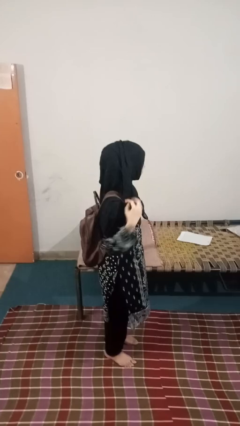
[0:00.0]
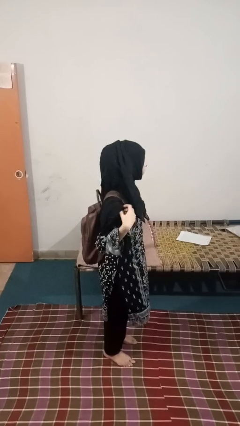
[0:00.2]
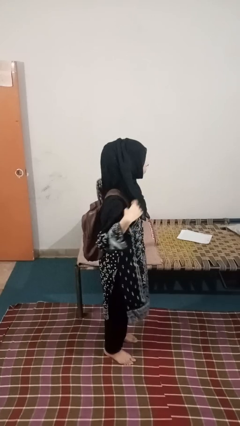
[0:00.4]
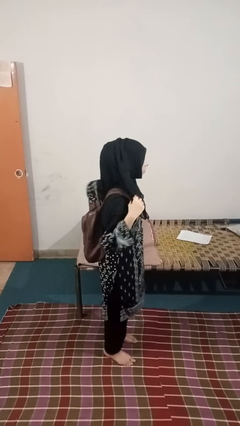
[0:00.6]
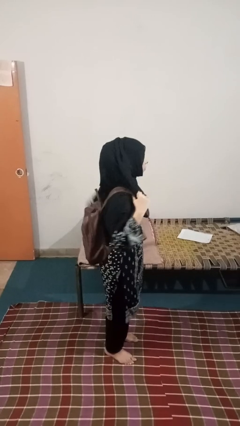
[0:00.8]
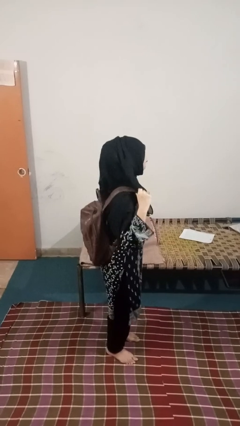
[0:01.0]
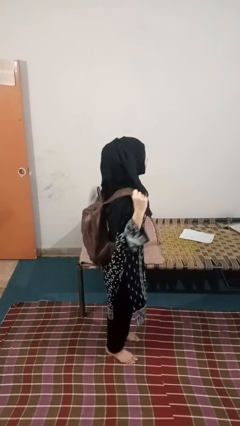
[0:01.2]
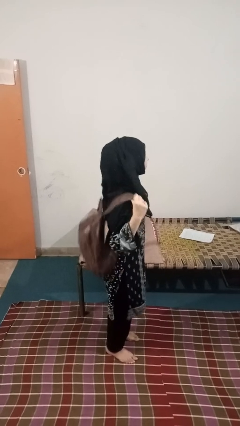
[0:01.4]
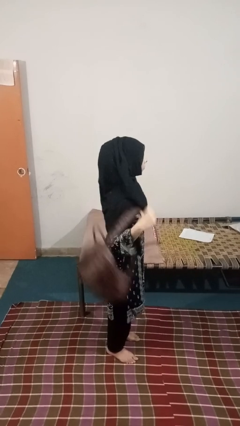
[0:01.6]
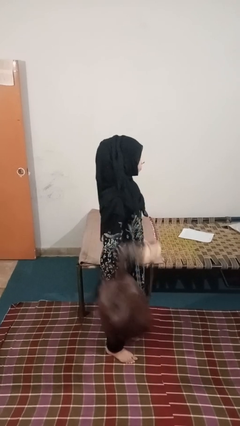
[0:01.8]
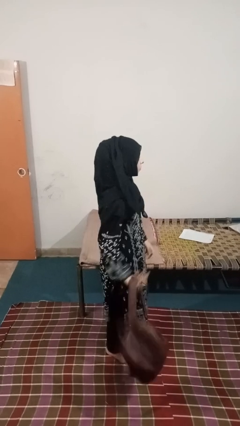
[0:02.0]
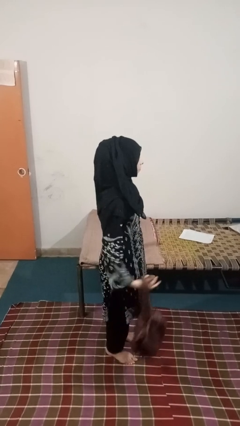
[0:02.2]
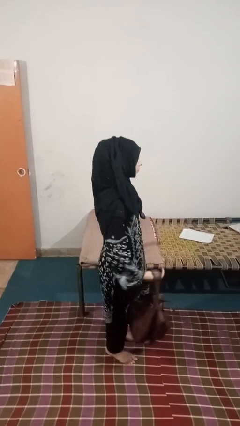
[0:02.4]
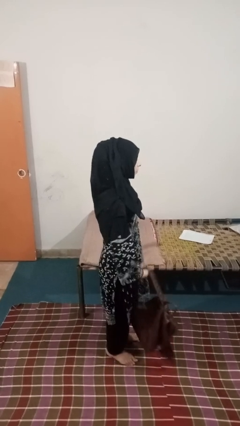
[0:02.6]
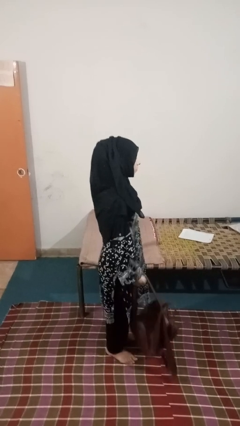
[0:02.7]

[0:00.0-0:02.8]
person takes off backpack

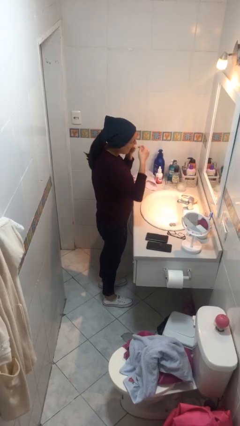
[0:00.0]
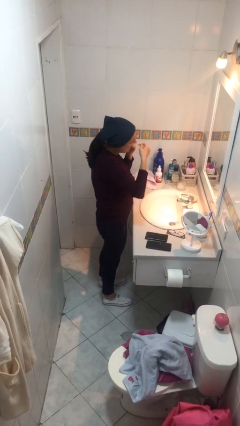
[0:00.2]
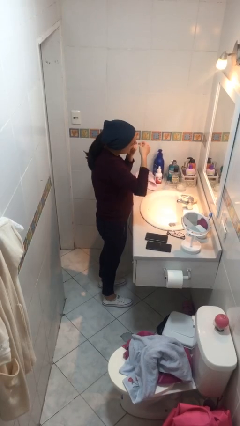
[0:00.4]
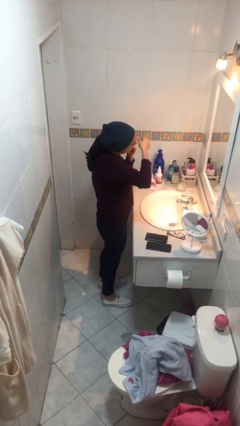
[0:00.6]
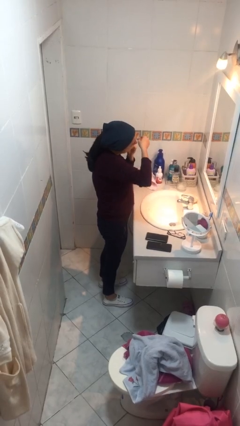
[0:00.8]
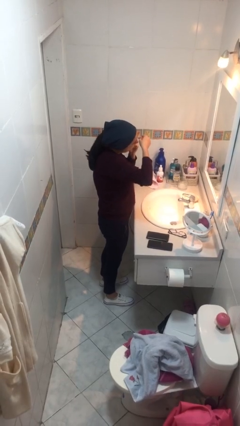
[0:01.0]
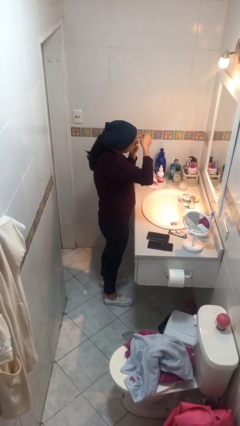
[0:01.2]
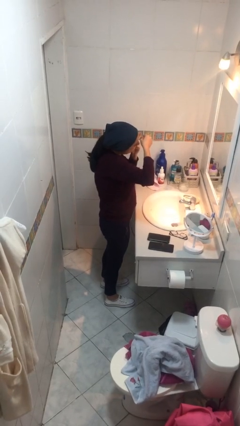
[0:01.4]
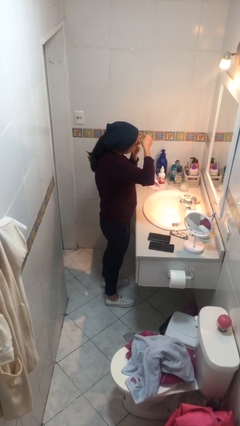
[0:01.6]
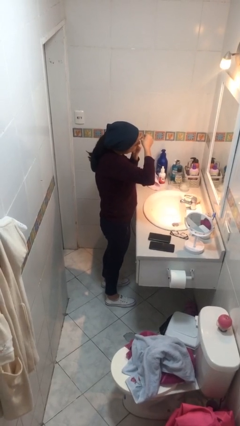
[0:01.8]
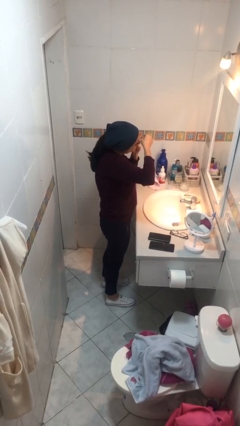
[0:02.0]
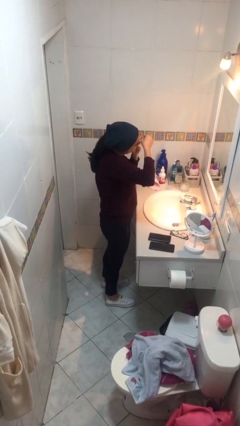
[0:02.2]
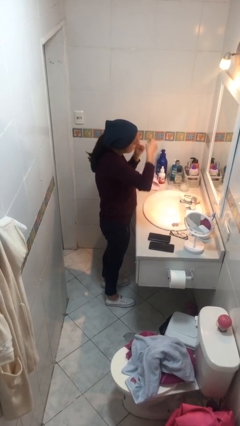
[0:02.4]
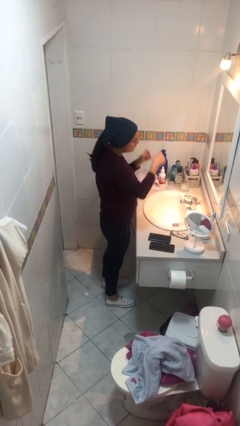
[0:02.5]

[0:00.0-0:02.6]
person flosses

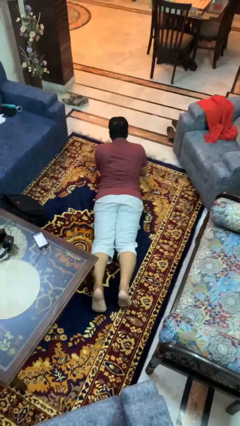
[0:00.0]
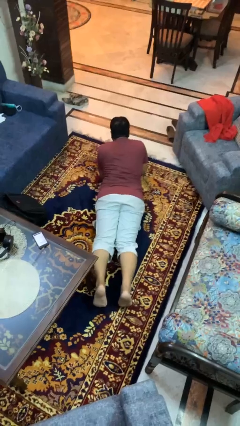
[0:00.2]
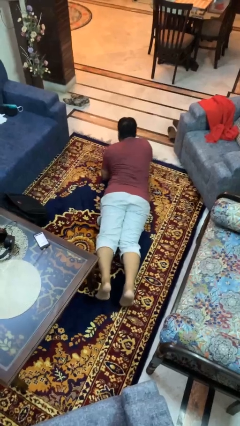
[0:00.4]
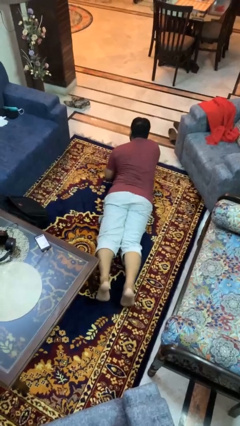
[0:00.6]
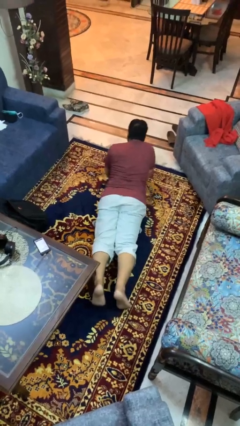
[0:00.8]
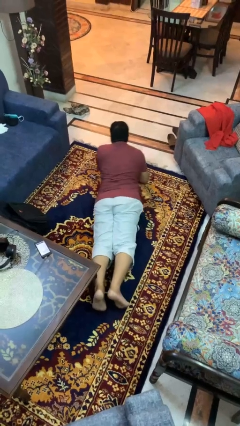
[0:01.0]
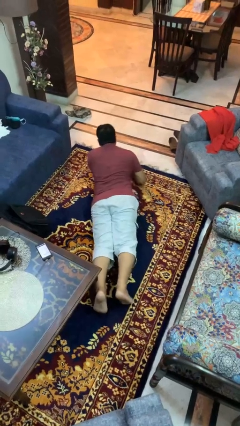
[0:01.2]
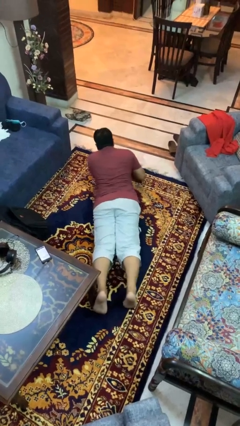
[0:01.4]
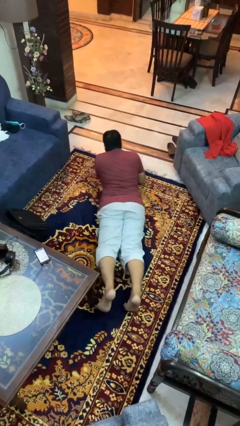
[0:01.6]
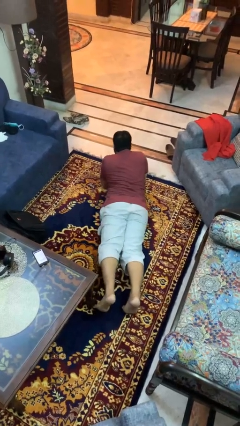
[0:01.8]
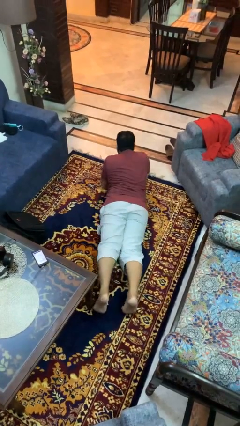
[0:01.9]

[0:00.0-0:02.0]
person crawls

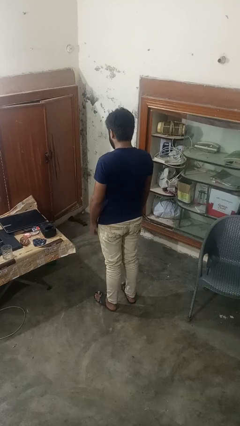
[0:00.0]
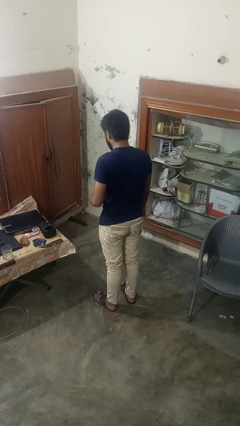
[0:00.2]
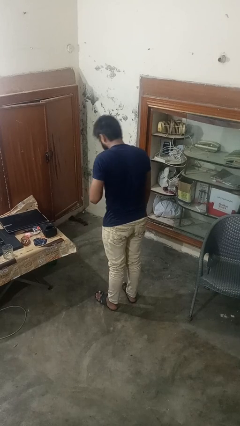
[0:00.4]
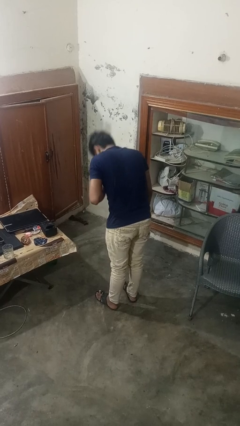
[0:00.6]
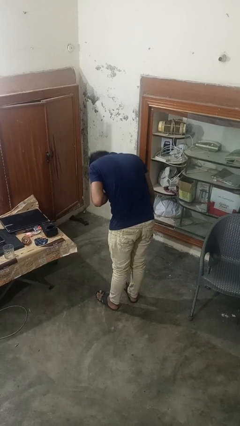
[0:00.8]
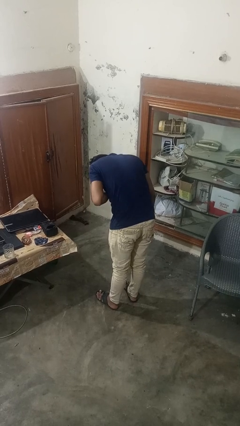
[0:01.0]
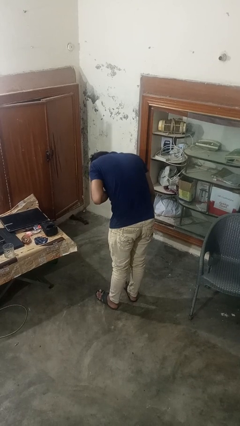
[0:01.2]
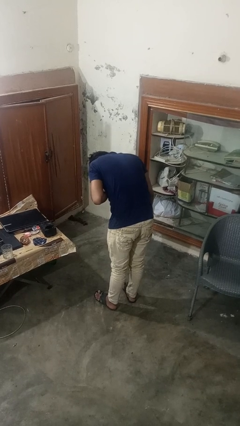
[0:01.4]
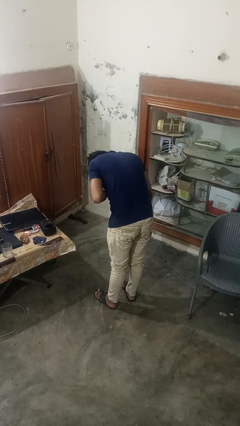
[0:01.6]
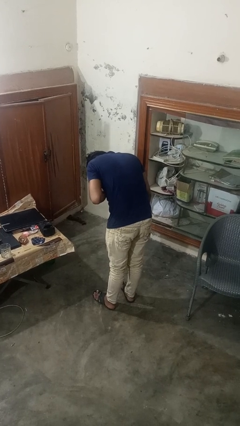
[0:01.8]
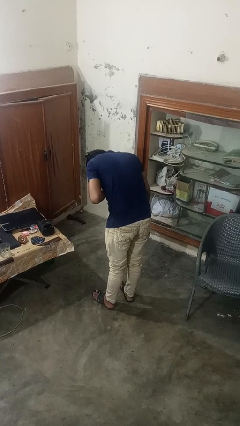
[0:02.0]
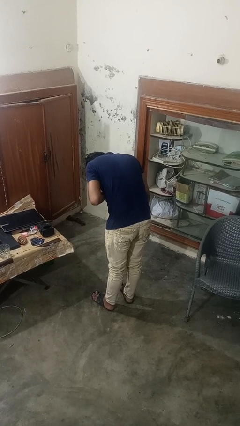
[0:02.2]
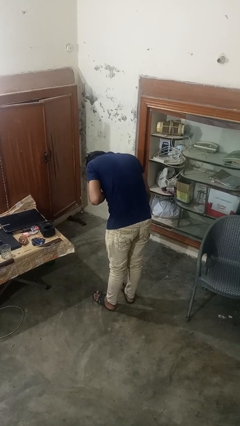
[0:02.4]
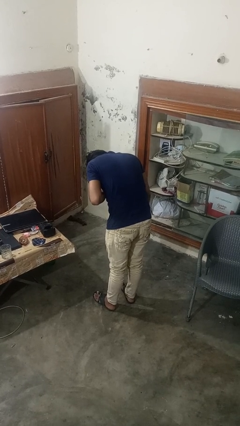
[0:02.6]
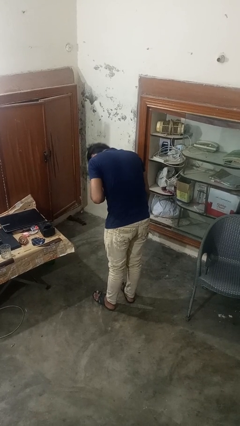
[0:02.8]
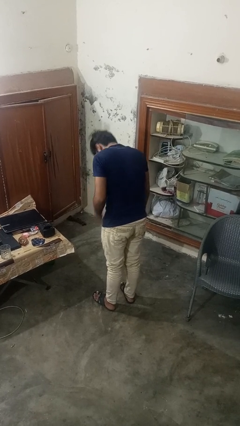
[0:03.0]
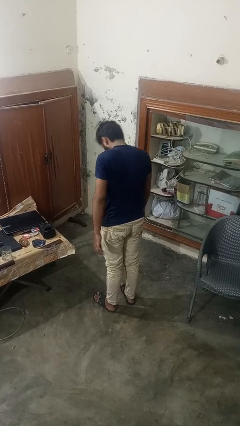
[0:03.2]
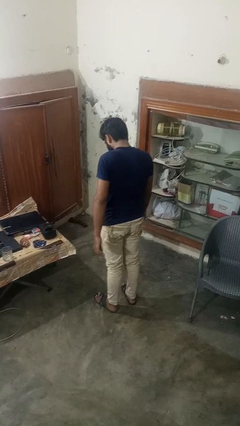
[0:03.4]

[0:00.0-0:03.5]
person bows

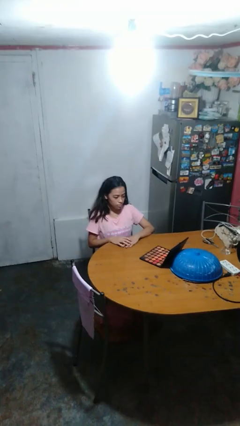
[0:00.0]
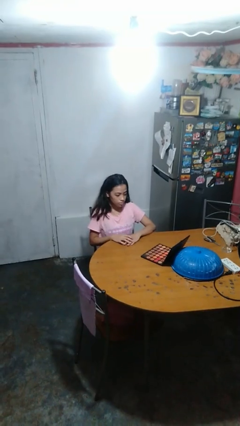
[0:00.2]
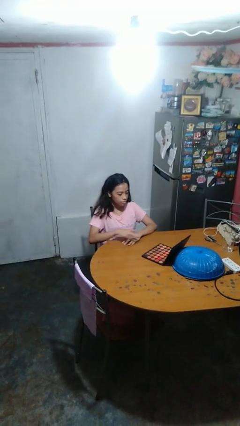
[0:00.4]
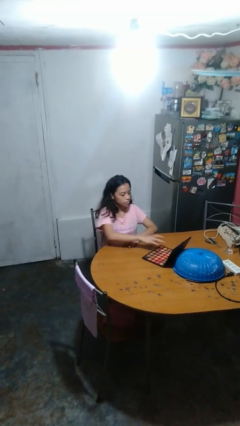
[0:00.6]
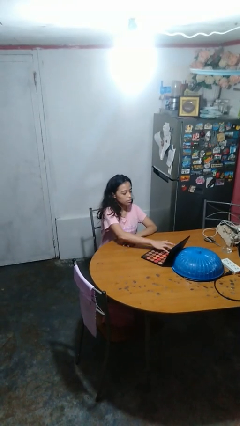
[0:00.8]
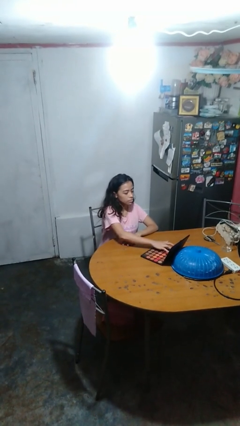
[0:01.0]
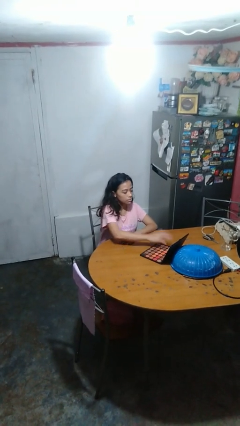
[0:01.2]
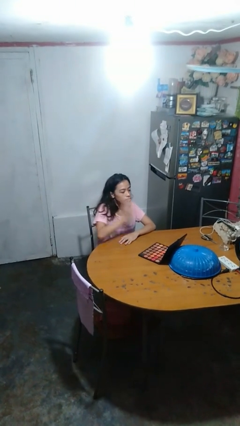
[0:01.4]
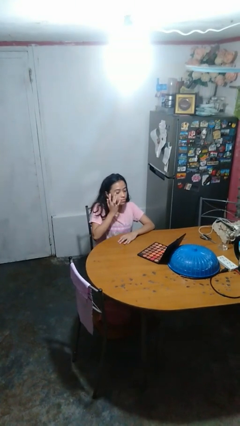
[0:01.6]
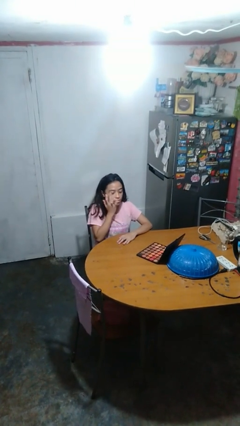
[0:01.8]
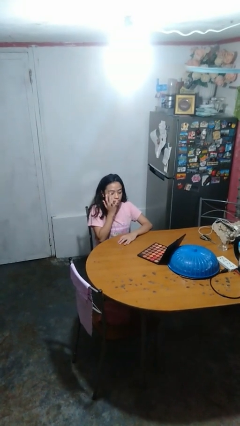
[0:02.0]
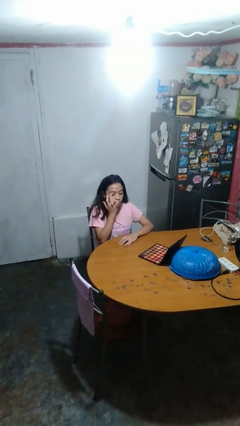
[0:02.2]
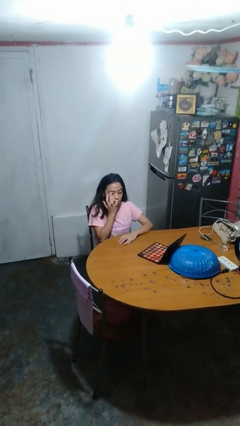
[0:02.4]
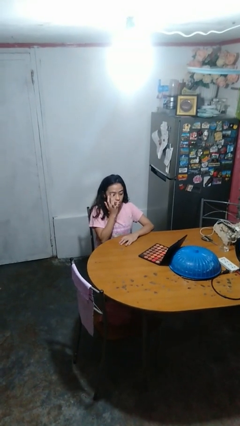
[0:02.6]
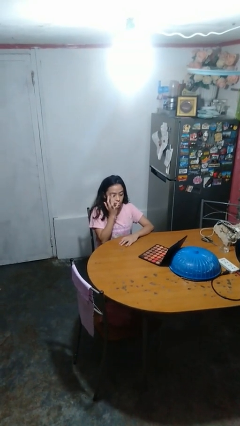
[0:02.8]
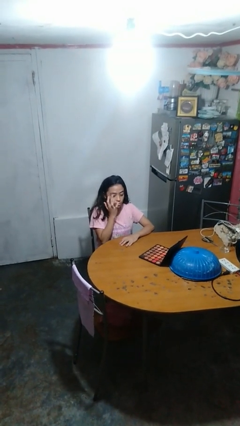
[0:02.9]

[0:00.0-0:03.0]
person applies eye makeup

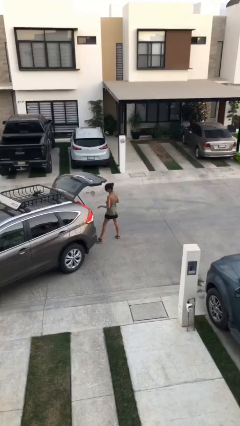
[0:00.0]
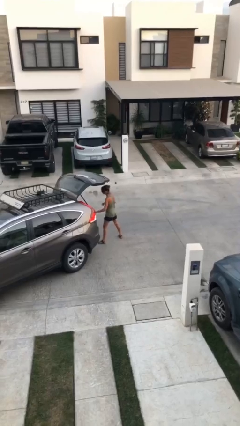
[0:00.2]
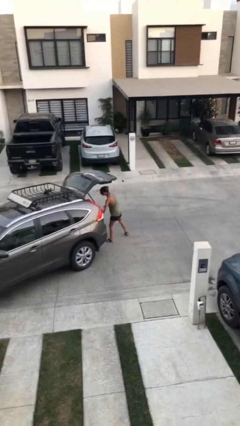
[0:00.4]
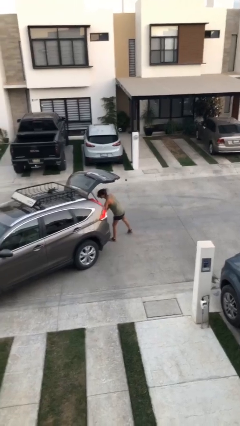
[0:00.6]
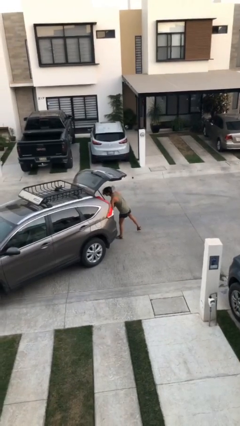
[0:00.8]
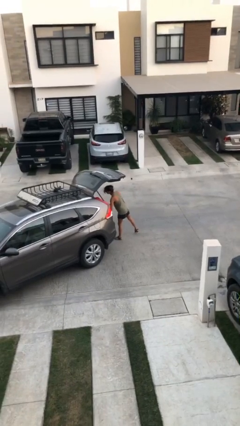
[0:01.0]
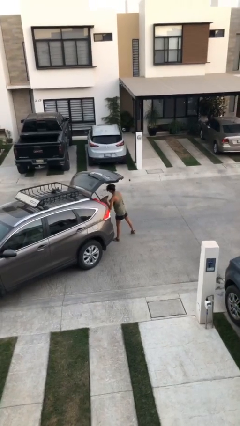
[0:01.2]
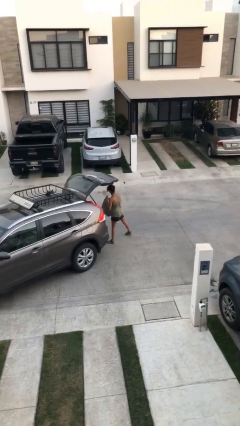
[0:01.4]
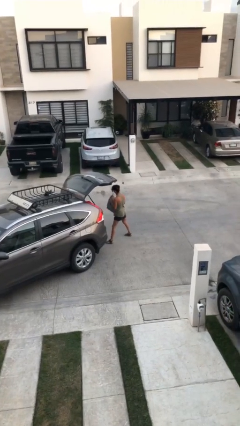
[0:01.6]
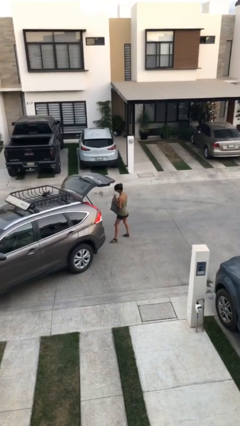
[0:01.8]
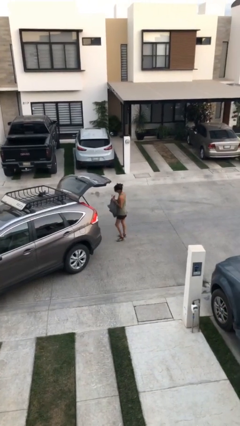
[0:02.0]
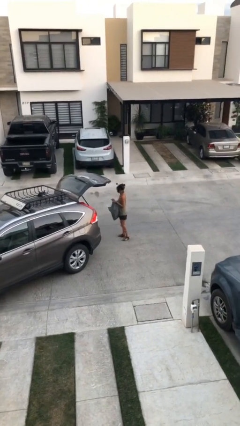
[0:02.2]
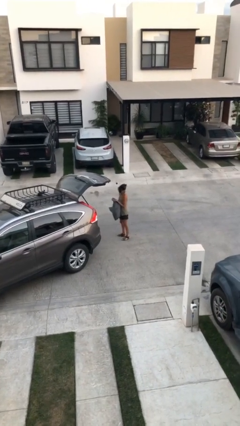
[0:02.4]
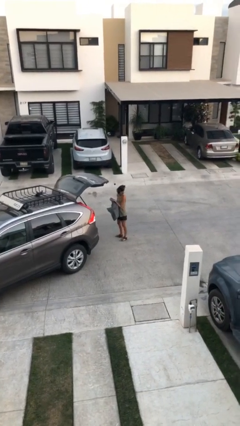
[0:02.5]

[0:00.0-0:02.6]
person unloads car

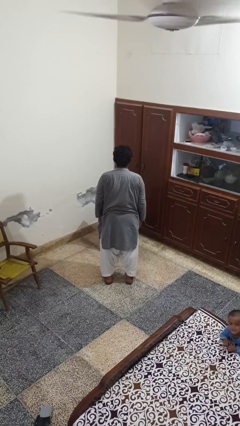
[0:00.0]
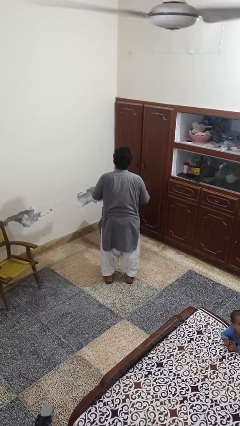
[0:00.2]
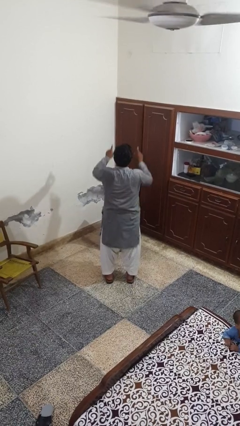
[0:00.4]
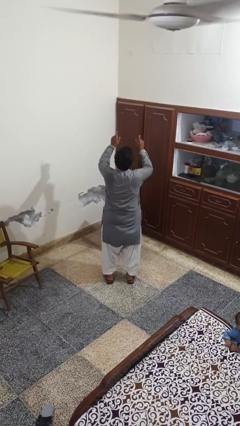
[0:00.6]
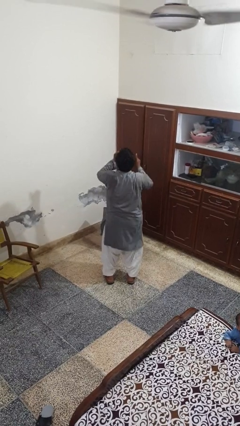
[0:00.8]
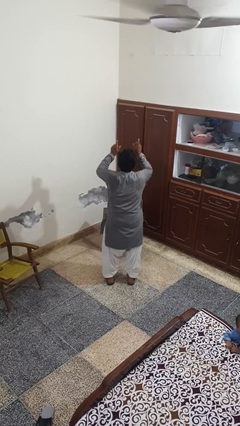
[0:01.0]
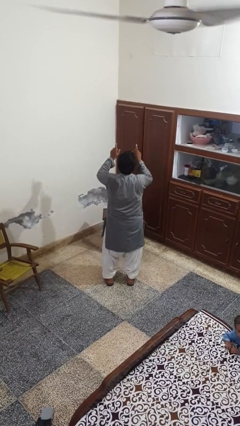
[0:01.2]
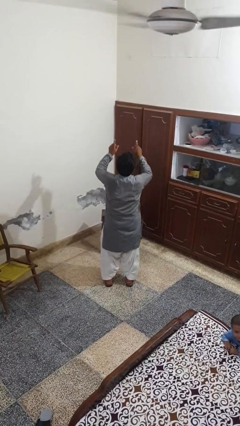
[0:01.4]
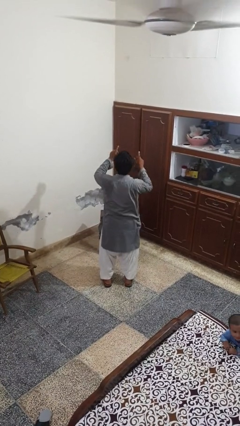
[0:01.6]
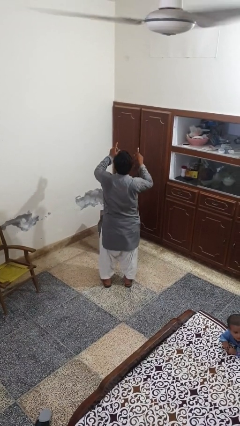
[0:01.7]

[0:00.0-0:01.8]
person dances in place
